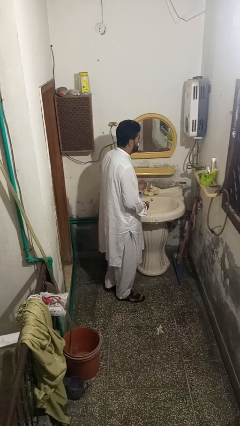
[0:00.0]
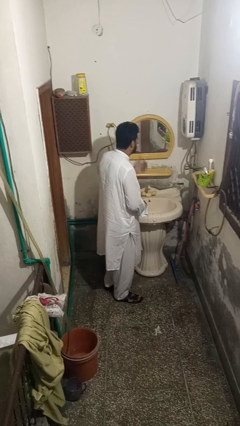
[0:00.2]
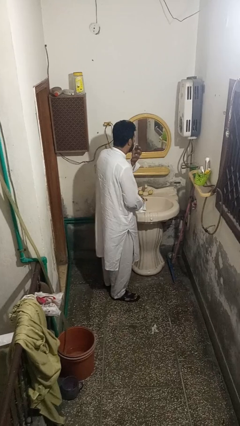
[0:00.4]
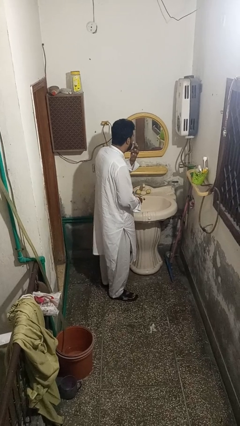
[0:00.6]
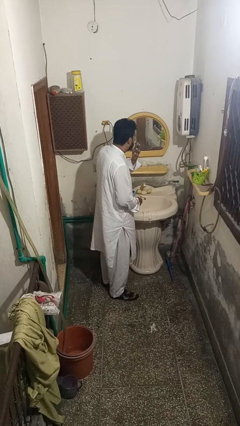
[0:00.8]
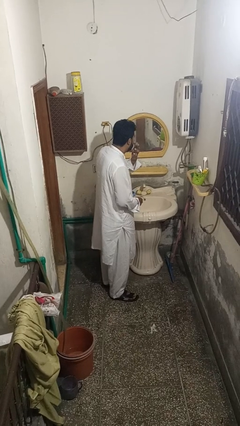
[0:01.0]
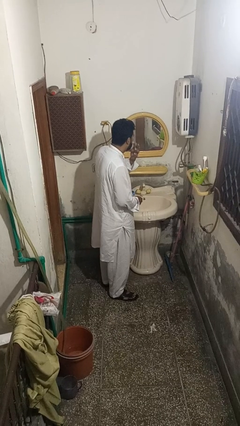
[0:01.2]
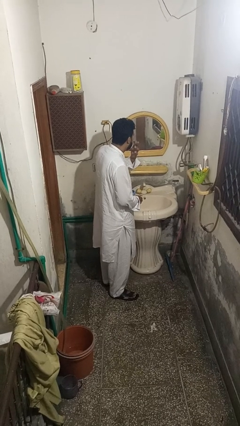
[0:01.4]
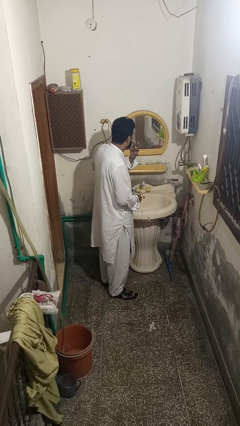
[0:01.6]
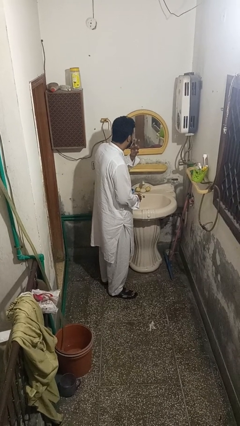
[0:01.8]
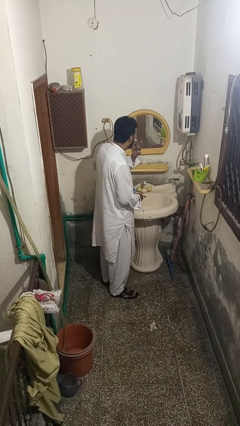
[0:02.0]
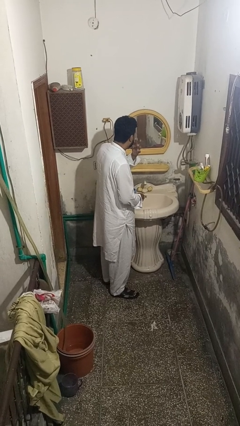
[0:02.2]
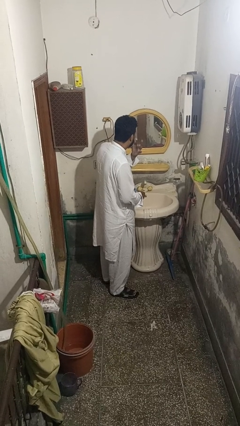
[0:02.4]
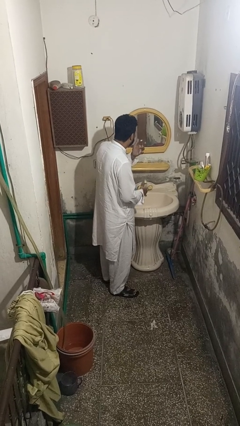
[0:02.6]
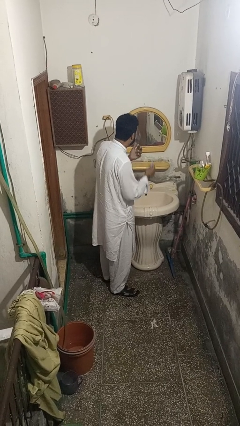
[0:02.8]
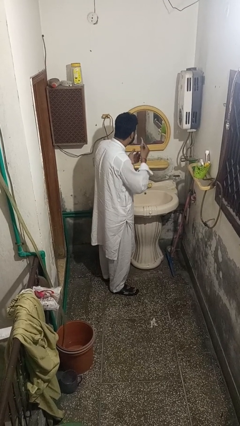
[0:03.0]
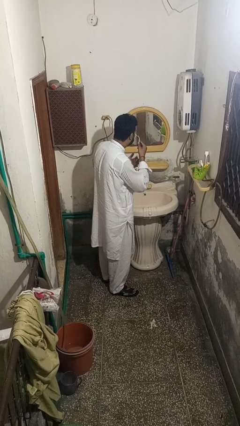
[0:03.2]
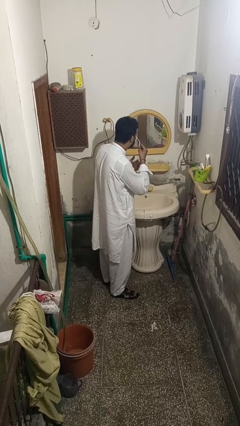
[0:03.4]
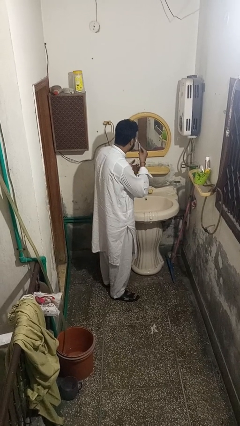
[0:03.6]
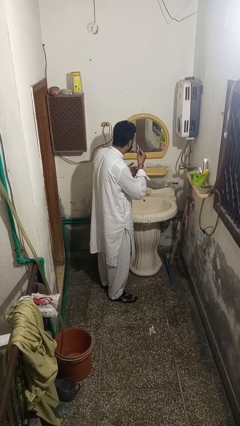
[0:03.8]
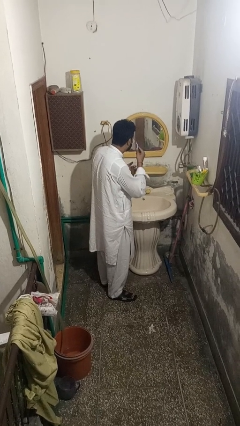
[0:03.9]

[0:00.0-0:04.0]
person applies shaving cream

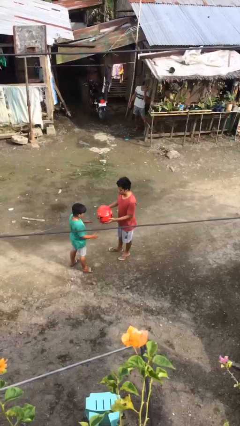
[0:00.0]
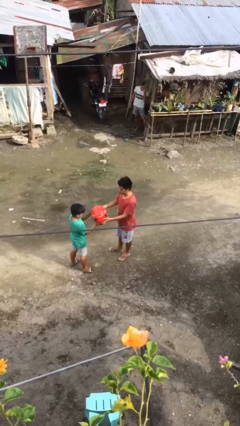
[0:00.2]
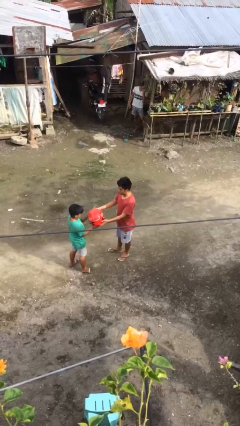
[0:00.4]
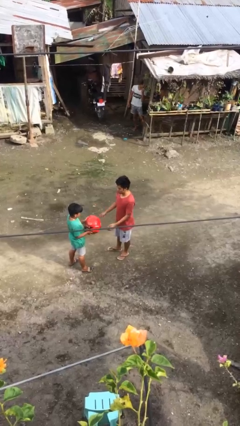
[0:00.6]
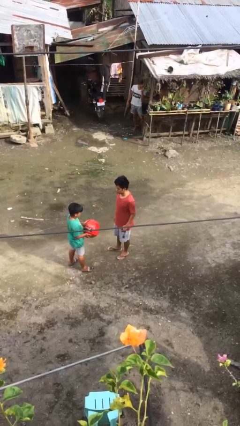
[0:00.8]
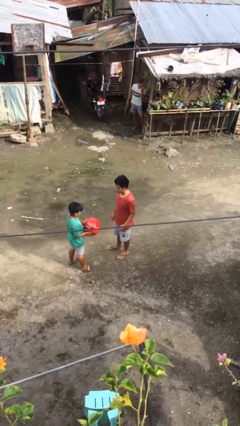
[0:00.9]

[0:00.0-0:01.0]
person transfers object to person

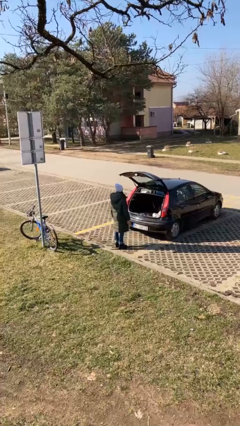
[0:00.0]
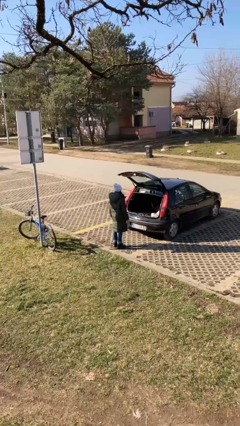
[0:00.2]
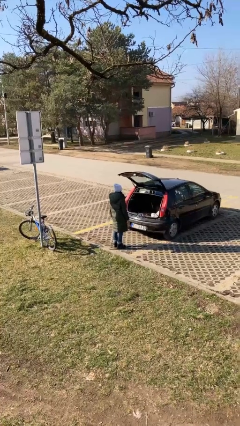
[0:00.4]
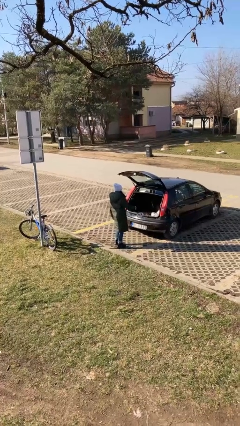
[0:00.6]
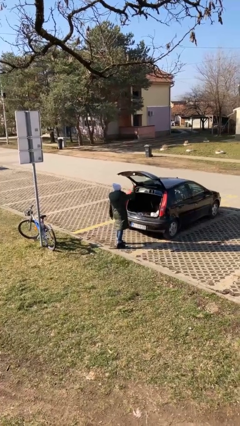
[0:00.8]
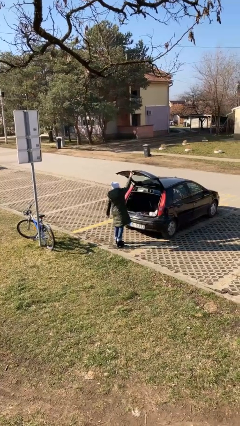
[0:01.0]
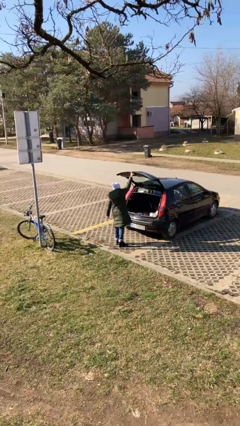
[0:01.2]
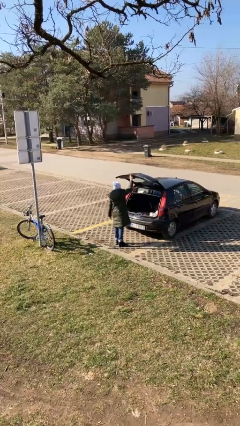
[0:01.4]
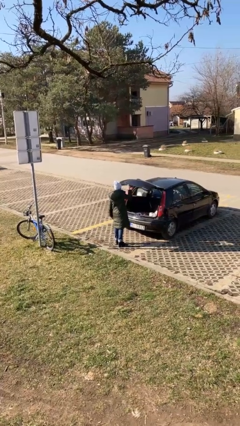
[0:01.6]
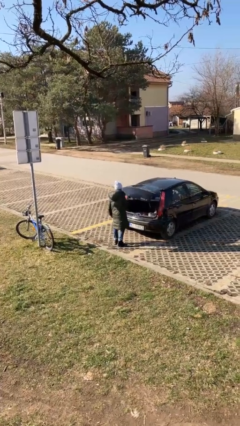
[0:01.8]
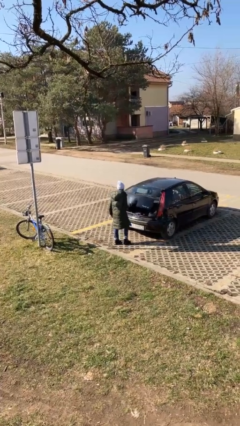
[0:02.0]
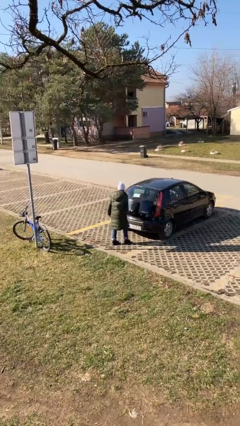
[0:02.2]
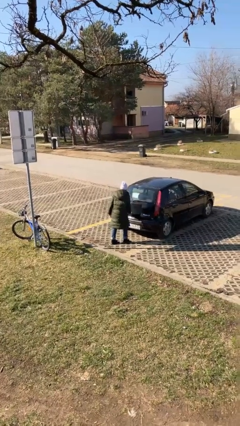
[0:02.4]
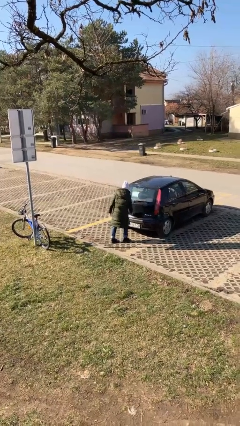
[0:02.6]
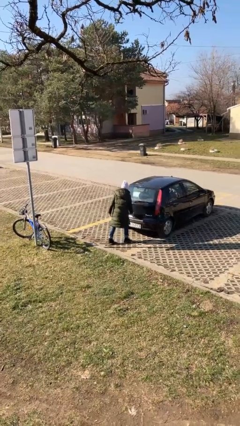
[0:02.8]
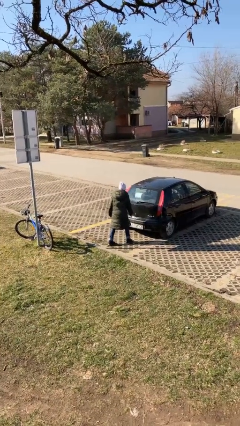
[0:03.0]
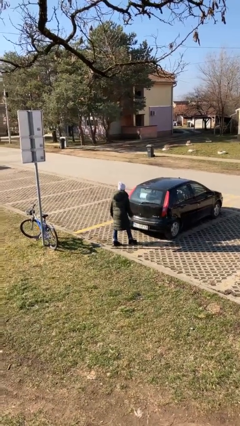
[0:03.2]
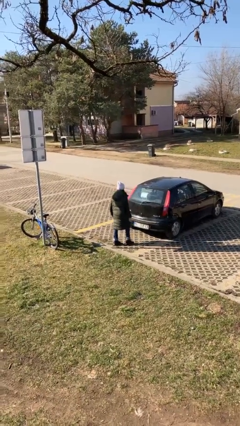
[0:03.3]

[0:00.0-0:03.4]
person closes car trunk

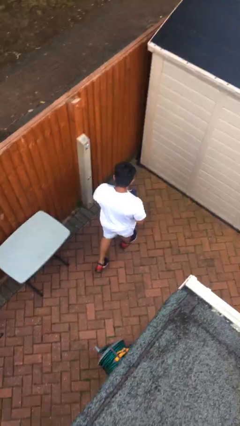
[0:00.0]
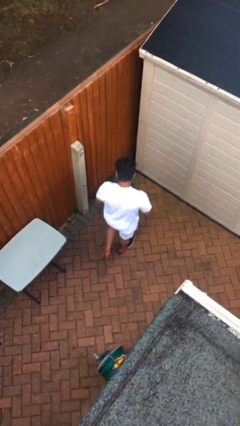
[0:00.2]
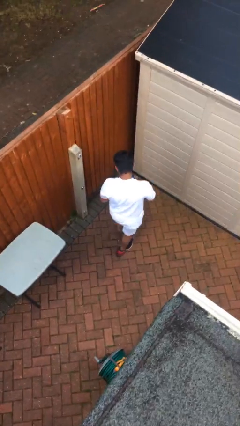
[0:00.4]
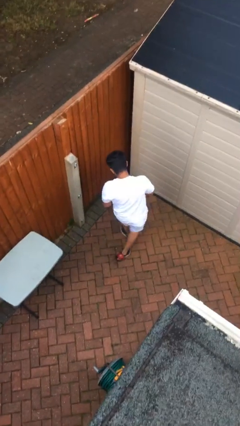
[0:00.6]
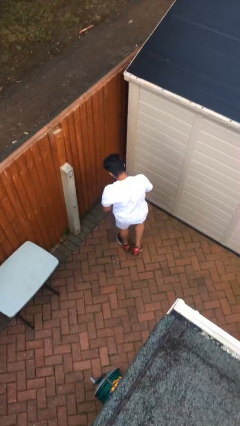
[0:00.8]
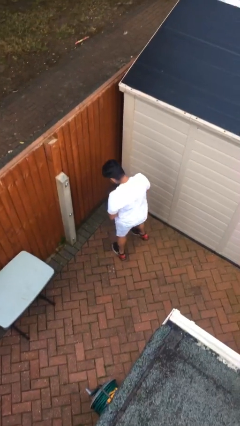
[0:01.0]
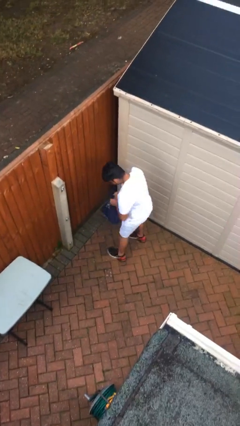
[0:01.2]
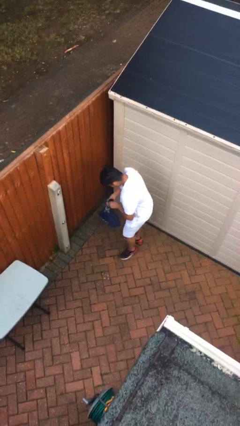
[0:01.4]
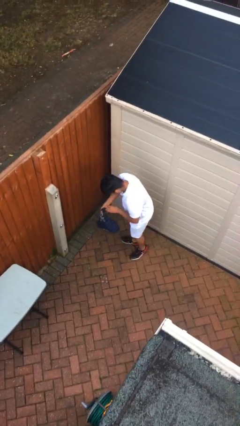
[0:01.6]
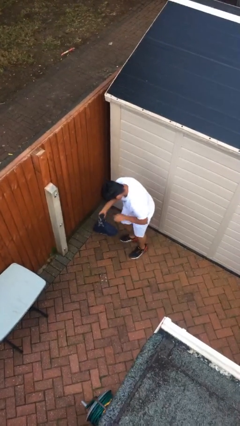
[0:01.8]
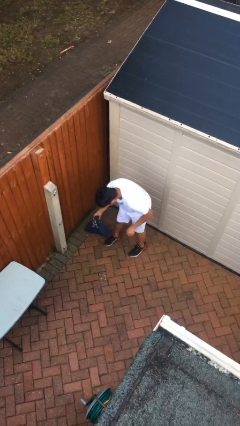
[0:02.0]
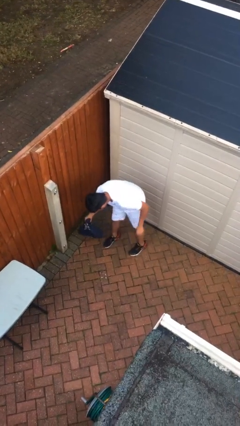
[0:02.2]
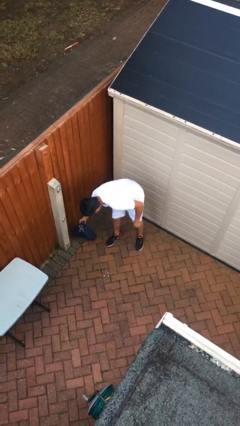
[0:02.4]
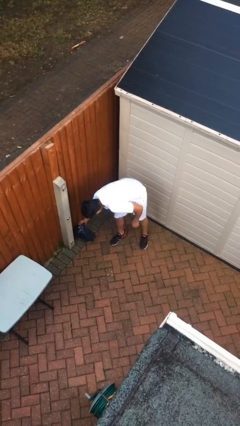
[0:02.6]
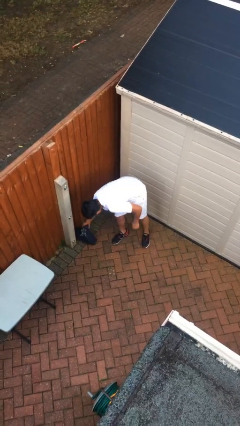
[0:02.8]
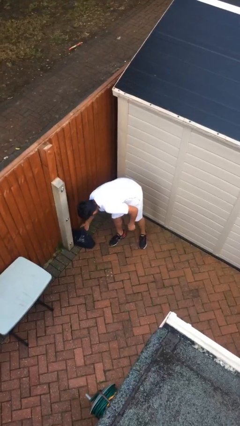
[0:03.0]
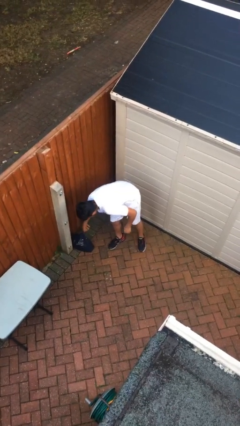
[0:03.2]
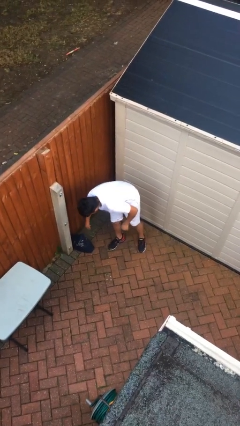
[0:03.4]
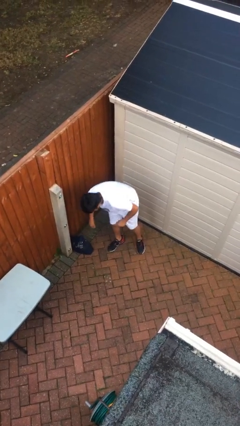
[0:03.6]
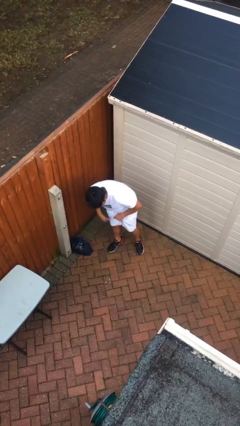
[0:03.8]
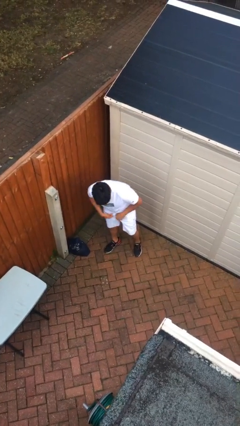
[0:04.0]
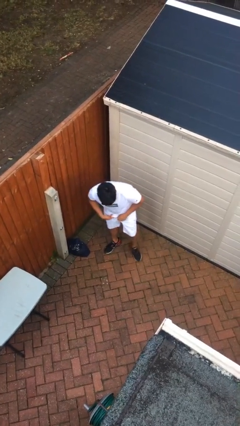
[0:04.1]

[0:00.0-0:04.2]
person puts down object on floor

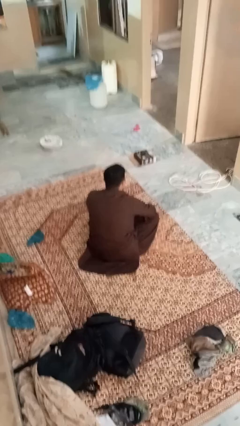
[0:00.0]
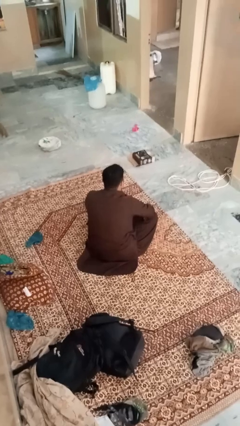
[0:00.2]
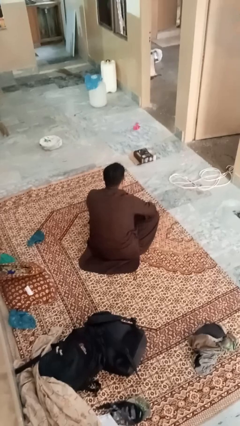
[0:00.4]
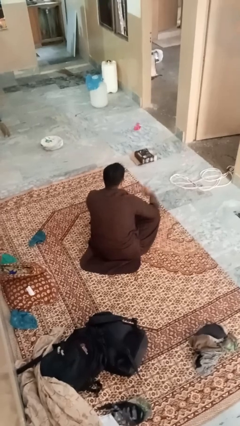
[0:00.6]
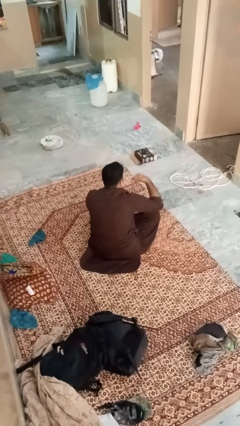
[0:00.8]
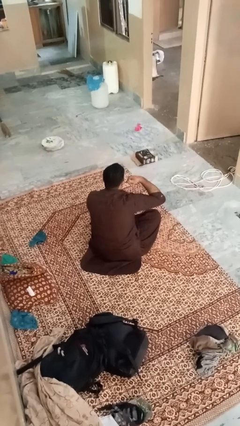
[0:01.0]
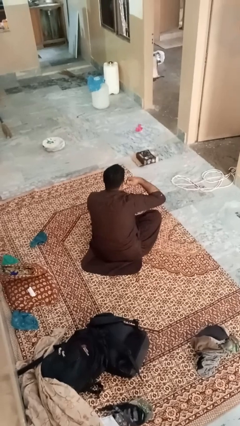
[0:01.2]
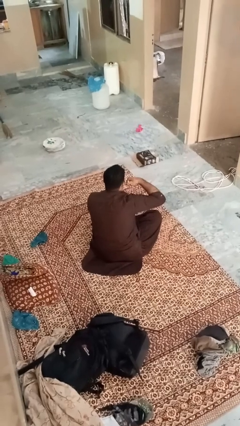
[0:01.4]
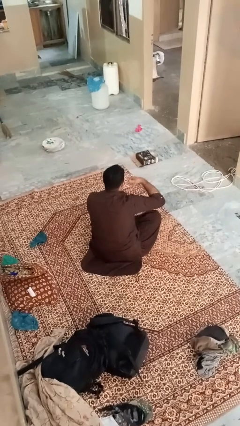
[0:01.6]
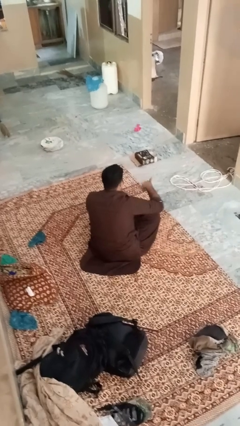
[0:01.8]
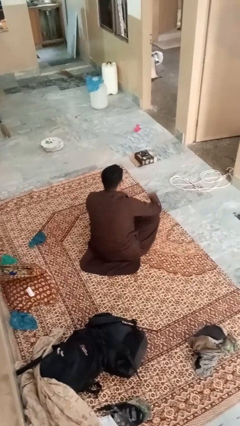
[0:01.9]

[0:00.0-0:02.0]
person gestures call me

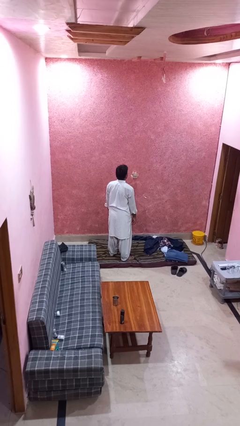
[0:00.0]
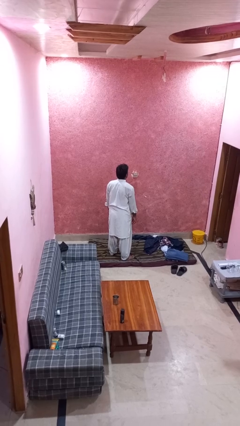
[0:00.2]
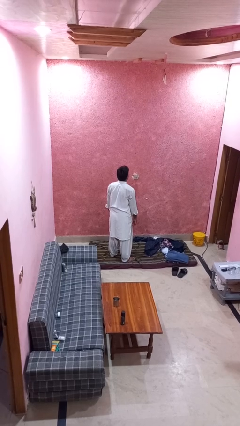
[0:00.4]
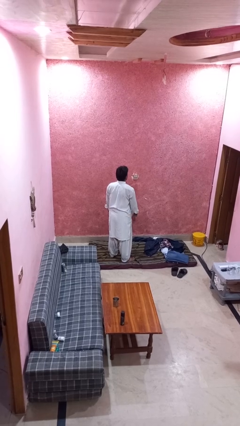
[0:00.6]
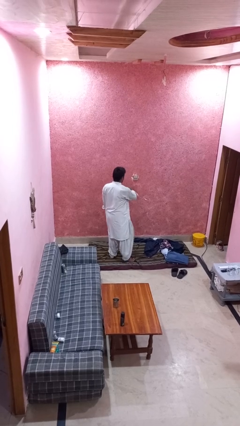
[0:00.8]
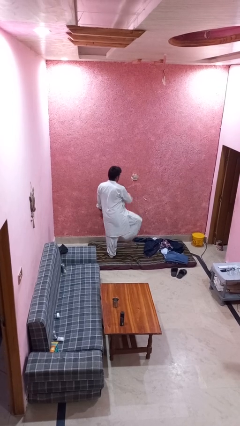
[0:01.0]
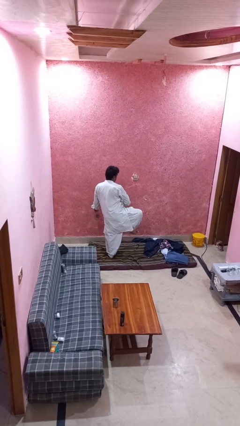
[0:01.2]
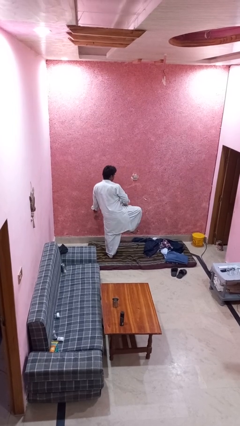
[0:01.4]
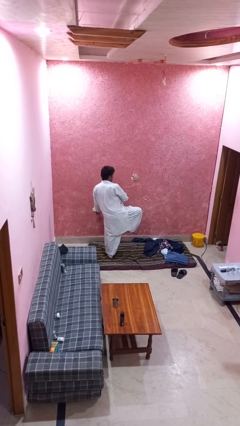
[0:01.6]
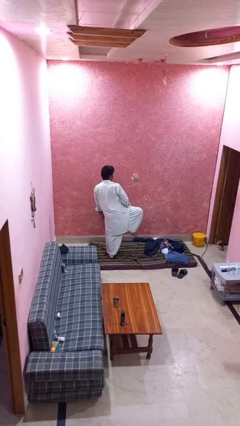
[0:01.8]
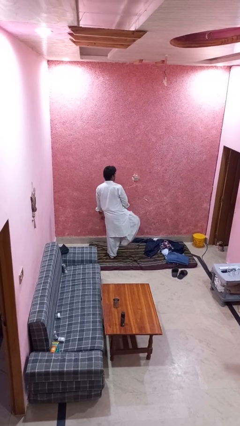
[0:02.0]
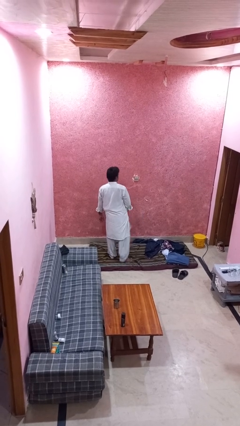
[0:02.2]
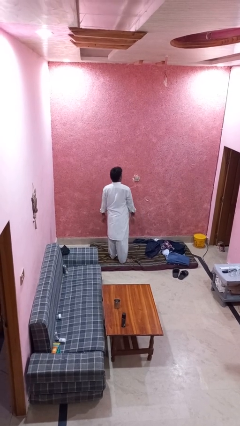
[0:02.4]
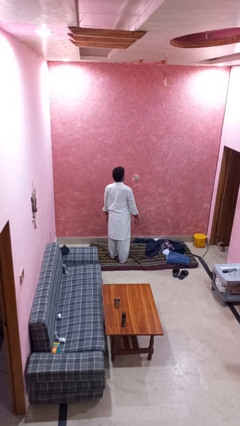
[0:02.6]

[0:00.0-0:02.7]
person slaps hands on thighs
